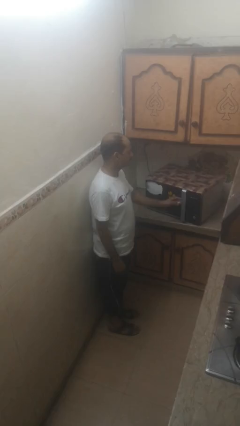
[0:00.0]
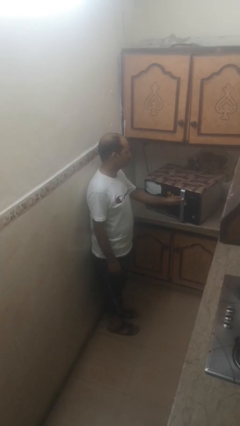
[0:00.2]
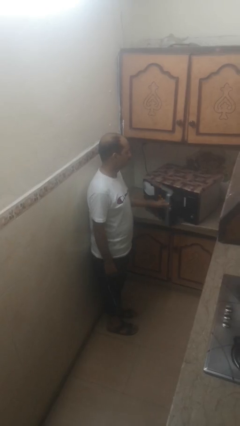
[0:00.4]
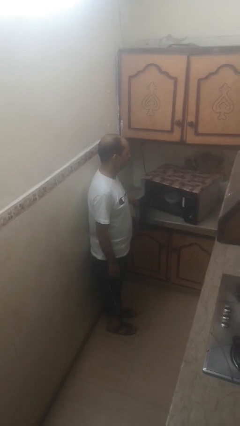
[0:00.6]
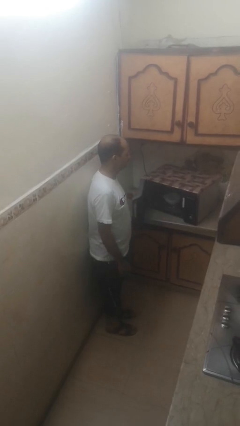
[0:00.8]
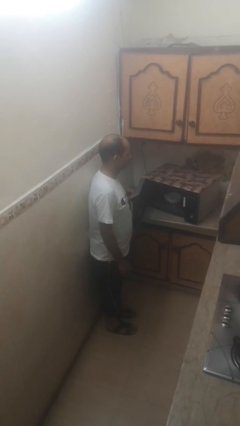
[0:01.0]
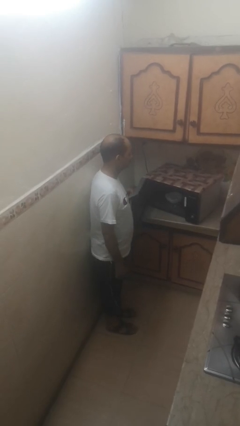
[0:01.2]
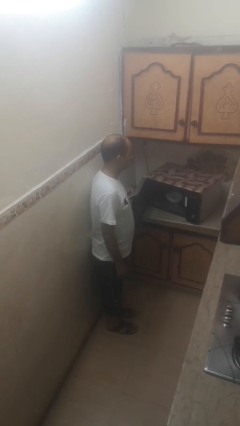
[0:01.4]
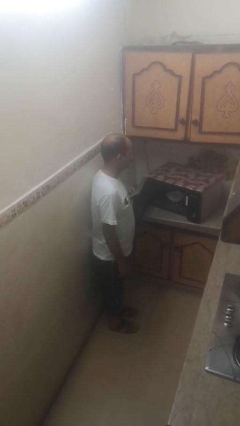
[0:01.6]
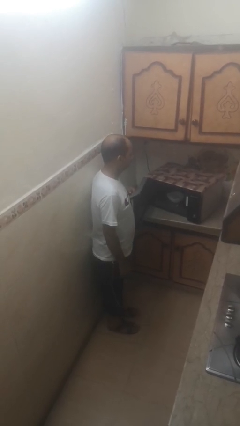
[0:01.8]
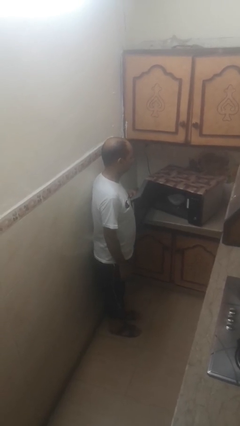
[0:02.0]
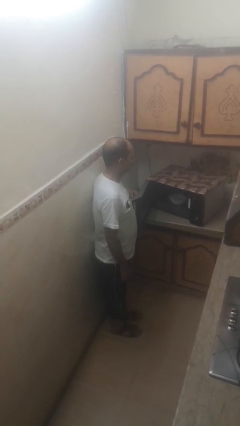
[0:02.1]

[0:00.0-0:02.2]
person opens microwave

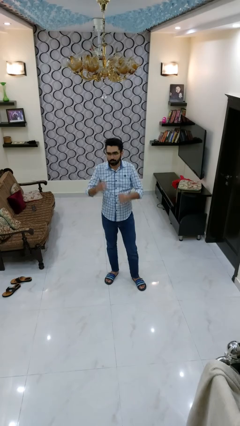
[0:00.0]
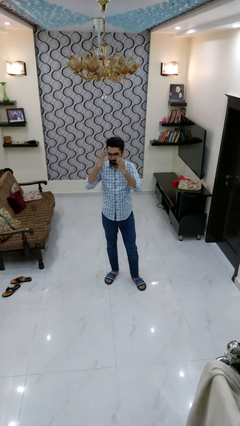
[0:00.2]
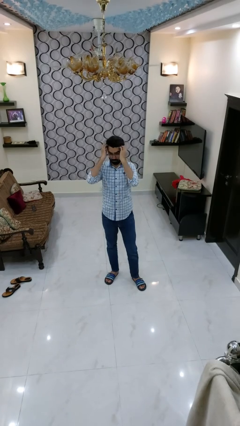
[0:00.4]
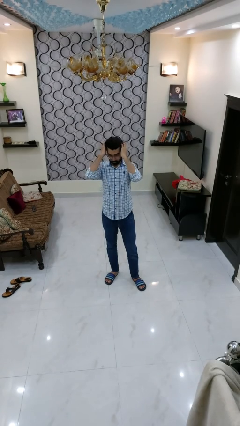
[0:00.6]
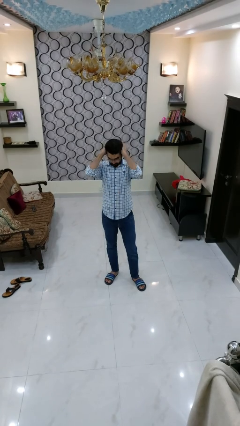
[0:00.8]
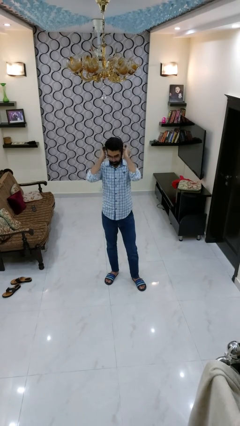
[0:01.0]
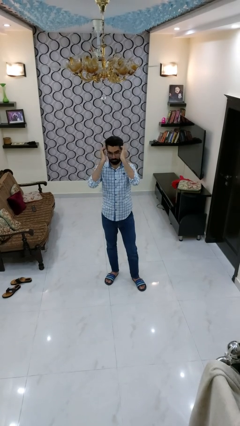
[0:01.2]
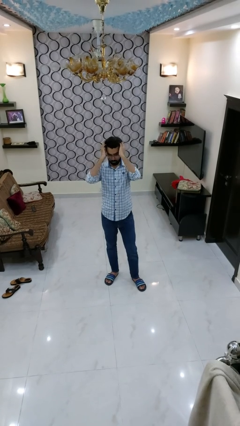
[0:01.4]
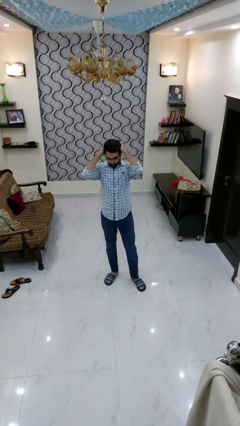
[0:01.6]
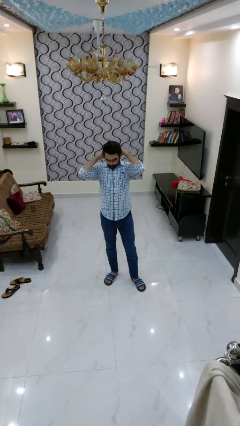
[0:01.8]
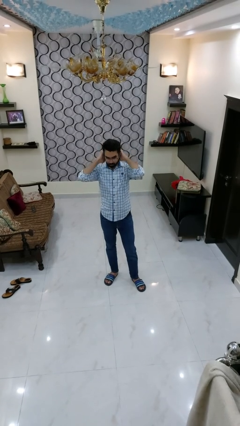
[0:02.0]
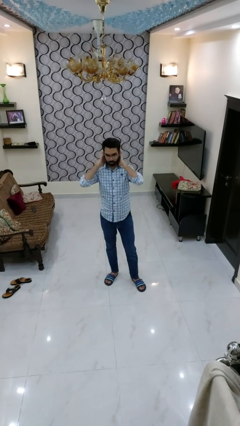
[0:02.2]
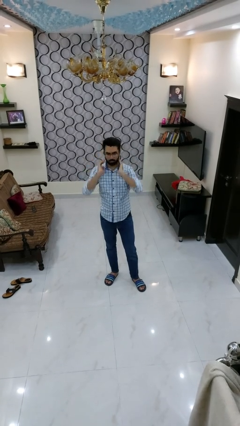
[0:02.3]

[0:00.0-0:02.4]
person strokes hair

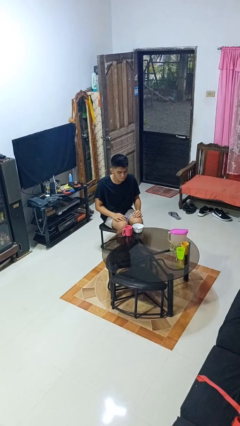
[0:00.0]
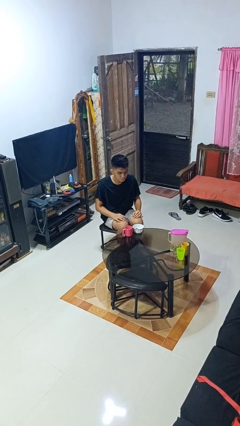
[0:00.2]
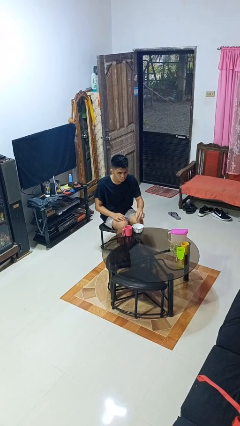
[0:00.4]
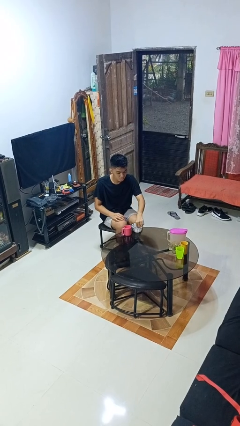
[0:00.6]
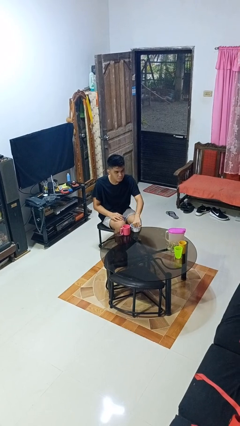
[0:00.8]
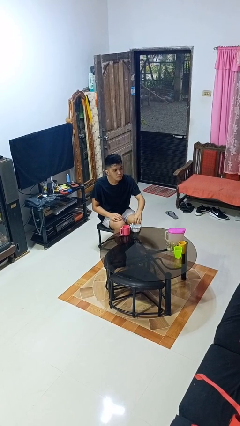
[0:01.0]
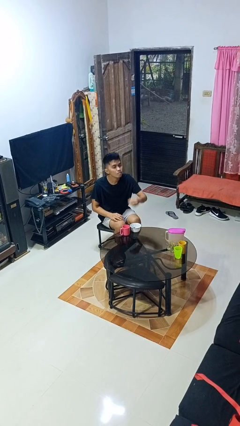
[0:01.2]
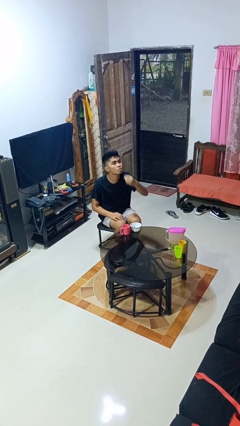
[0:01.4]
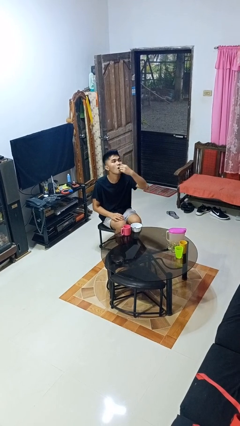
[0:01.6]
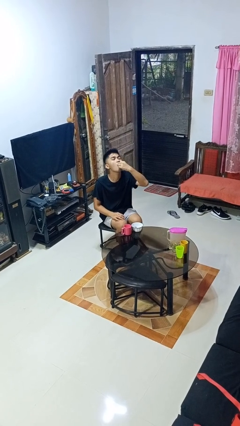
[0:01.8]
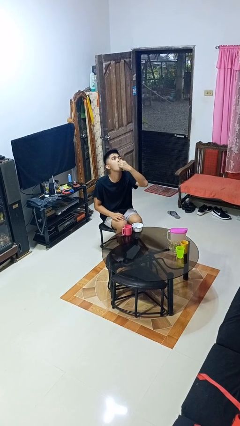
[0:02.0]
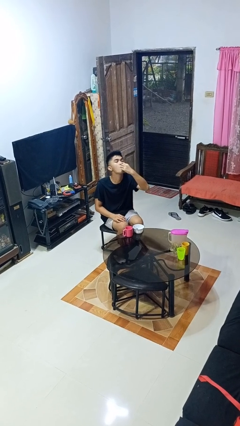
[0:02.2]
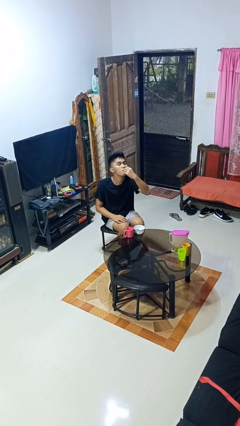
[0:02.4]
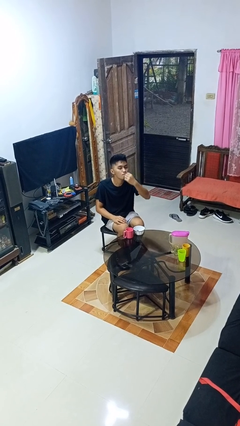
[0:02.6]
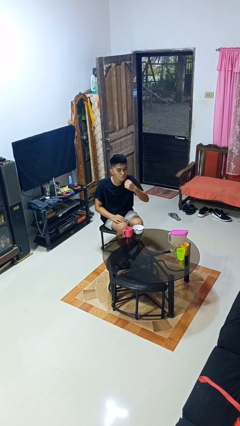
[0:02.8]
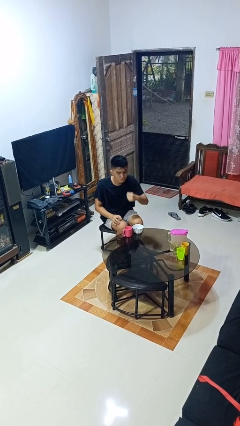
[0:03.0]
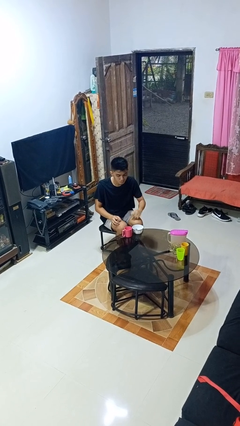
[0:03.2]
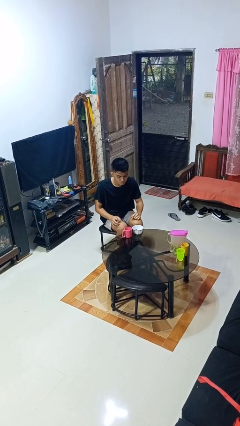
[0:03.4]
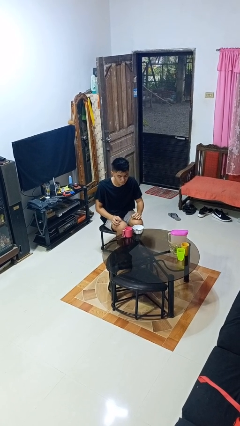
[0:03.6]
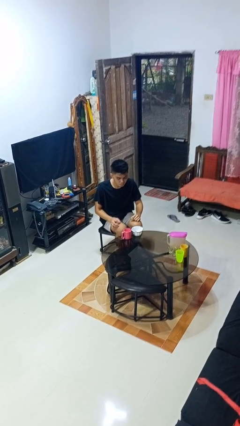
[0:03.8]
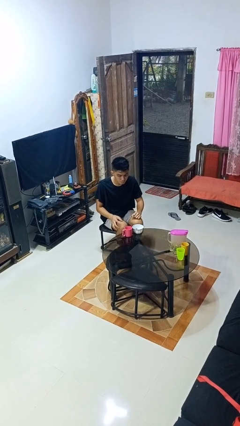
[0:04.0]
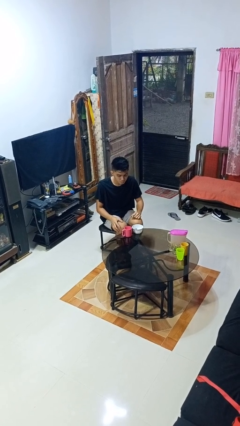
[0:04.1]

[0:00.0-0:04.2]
person takes medicine pills

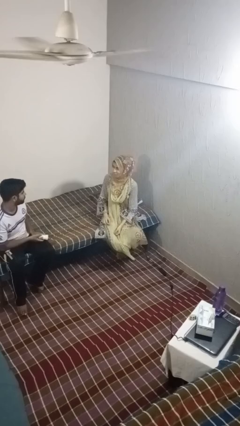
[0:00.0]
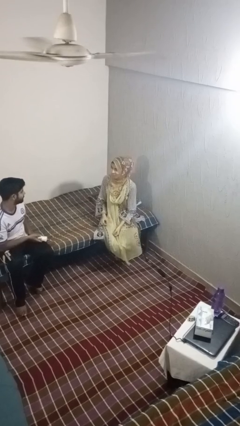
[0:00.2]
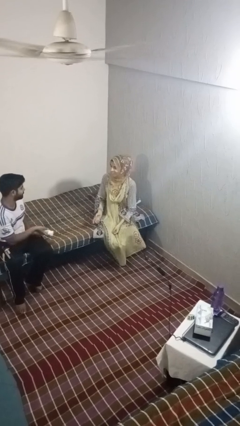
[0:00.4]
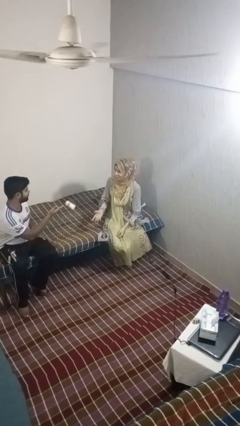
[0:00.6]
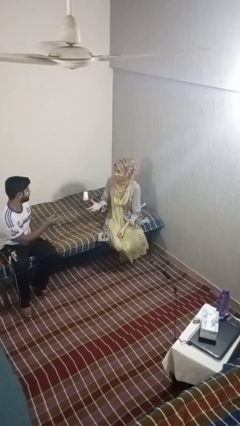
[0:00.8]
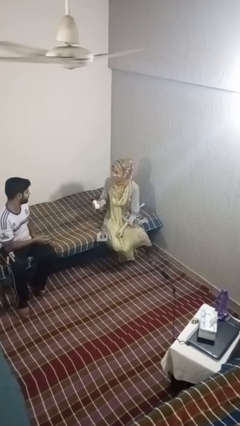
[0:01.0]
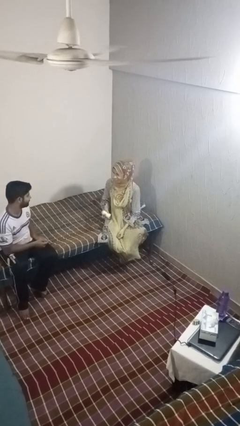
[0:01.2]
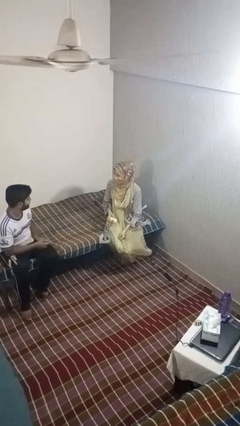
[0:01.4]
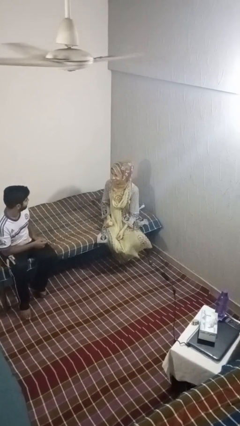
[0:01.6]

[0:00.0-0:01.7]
person catches object from person

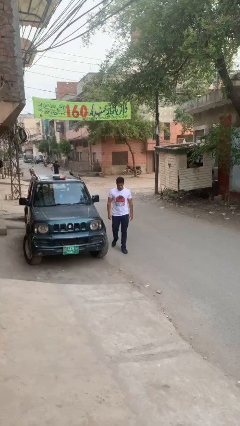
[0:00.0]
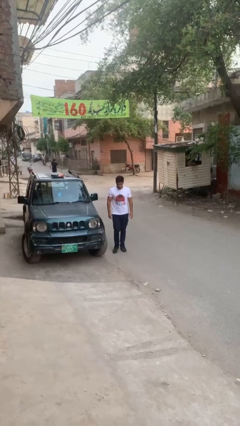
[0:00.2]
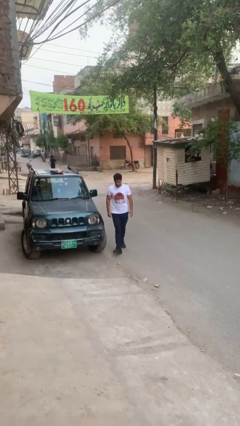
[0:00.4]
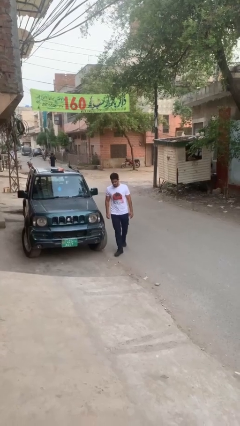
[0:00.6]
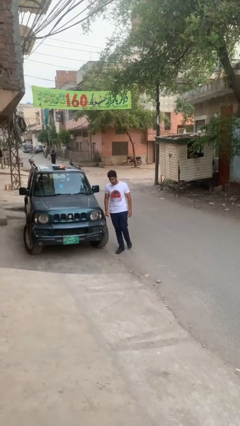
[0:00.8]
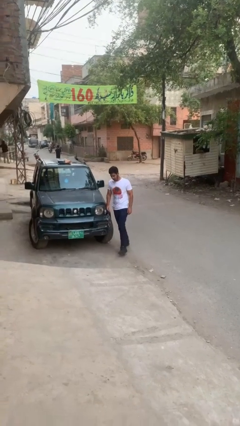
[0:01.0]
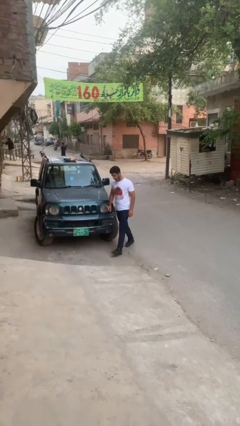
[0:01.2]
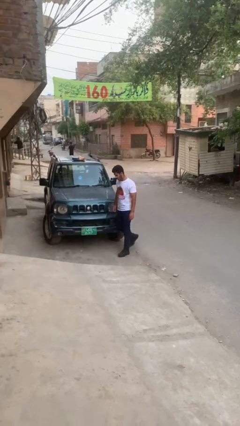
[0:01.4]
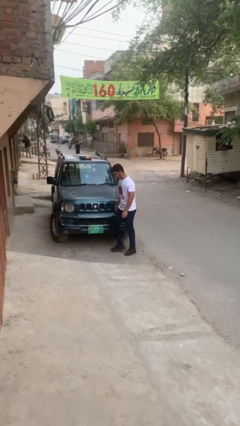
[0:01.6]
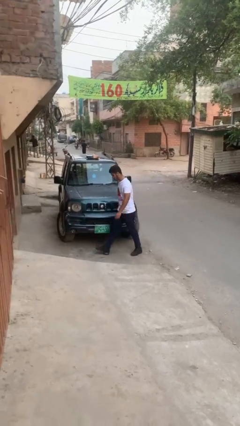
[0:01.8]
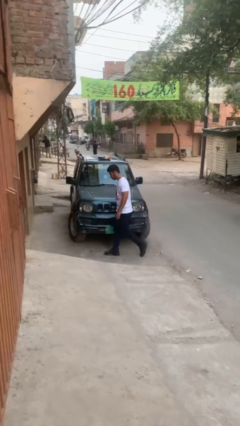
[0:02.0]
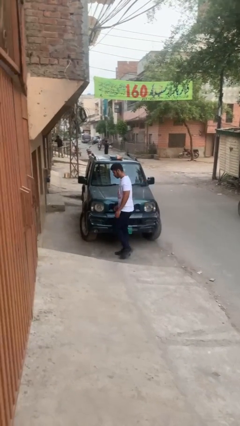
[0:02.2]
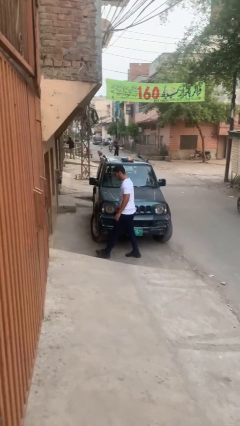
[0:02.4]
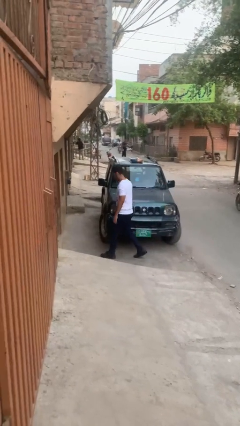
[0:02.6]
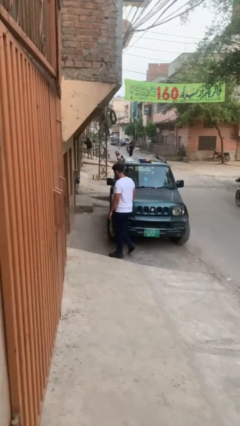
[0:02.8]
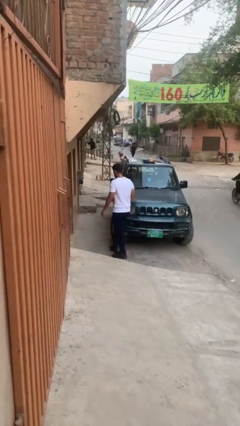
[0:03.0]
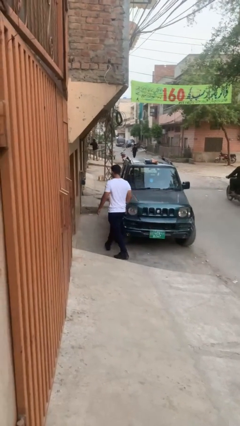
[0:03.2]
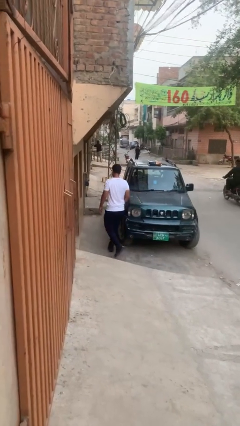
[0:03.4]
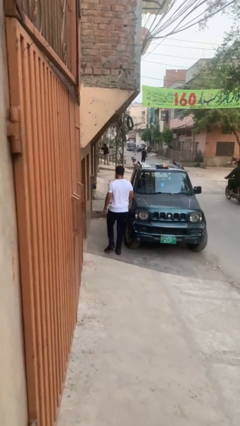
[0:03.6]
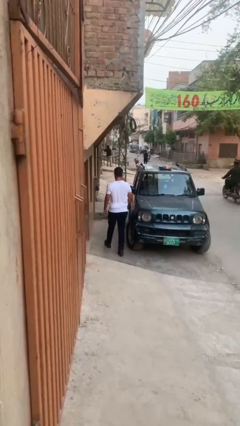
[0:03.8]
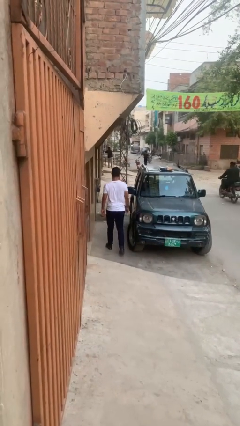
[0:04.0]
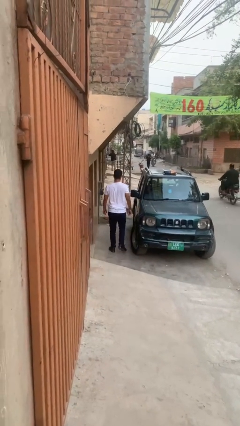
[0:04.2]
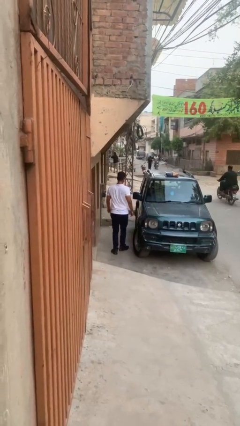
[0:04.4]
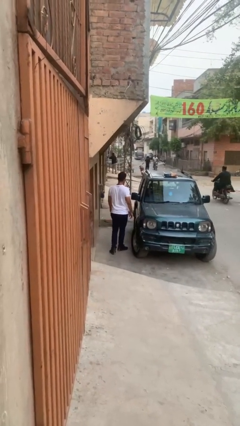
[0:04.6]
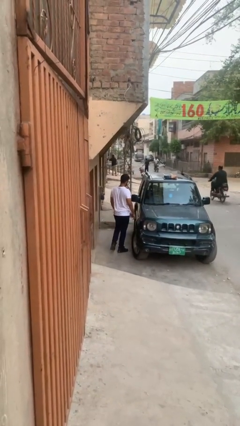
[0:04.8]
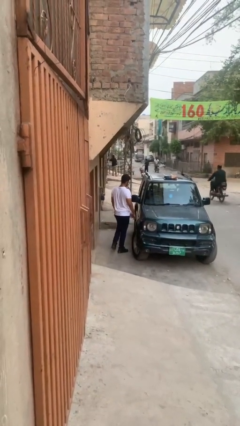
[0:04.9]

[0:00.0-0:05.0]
person walks around car

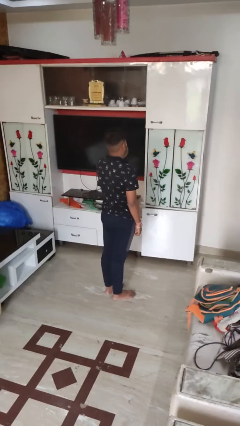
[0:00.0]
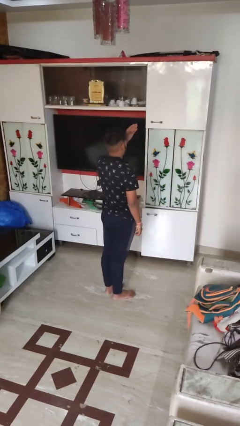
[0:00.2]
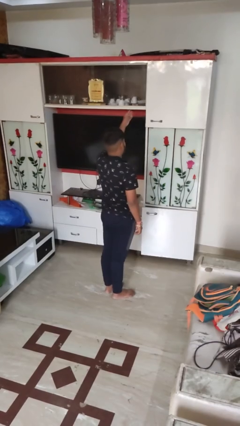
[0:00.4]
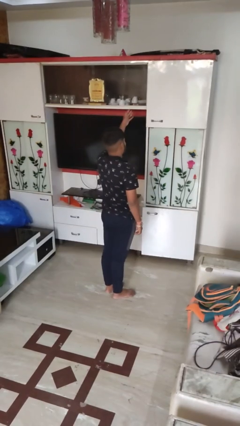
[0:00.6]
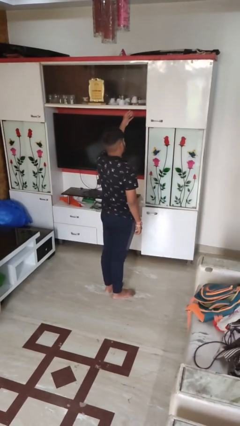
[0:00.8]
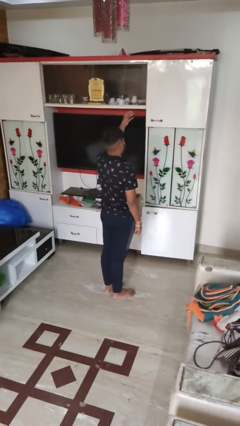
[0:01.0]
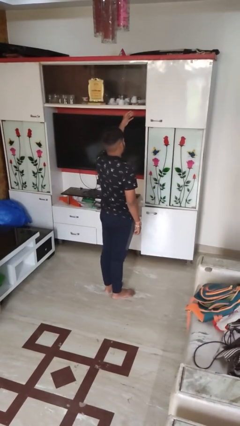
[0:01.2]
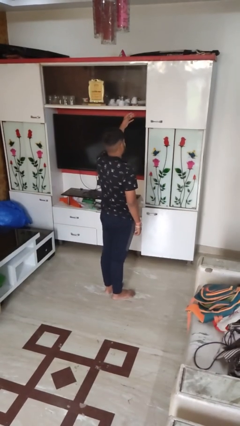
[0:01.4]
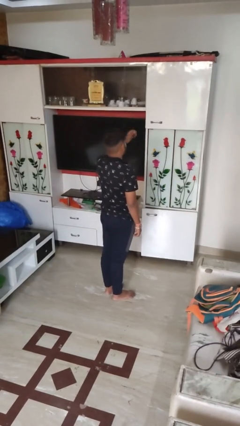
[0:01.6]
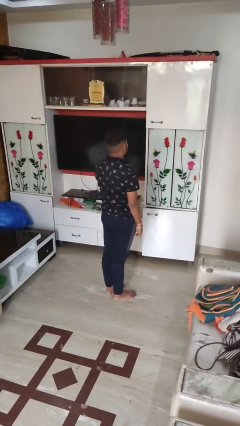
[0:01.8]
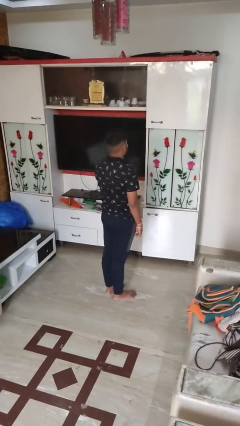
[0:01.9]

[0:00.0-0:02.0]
person gestures blow kiss
